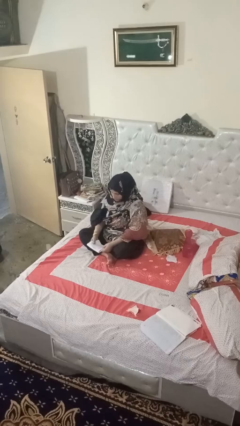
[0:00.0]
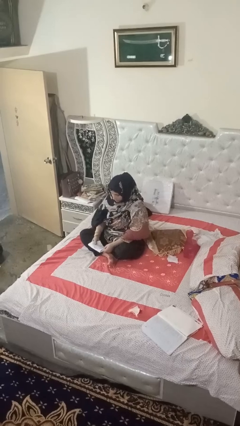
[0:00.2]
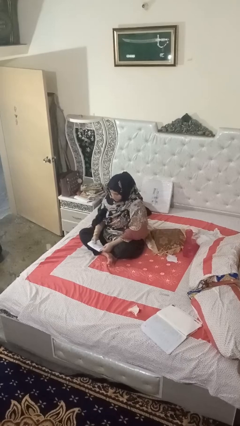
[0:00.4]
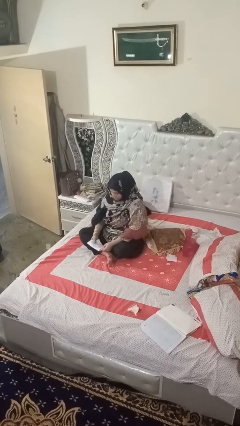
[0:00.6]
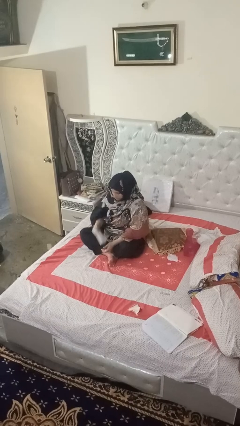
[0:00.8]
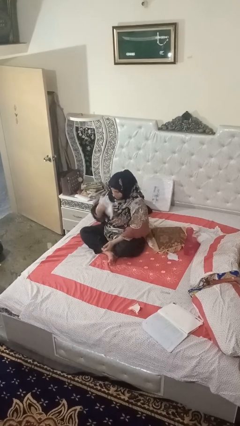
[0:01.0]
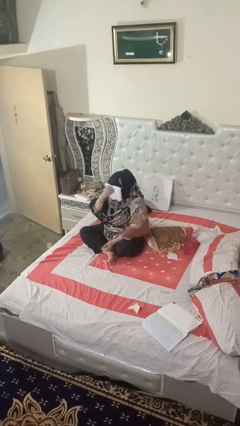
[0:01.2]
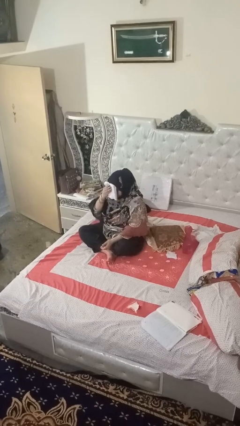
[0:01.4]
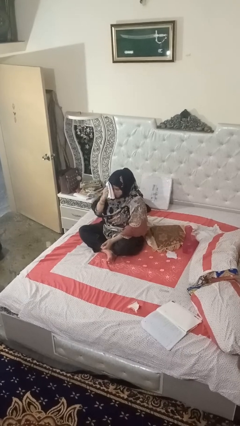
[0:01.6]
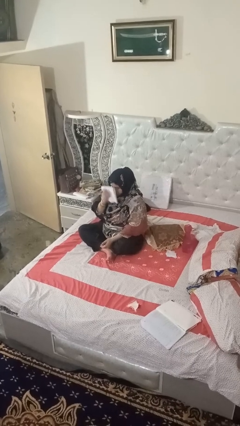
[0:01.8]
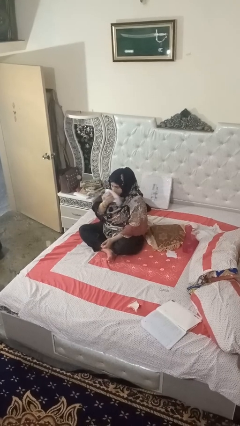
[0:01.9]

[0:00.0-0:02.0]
person wipes mouth with napkin

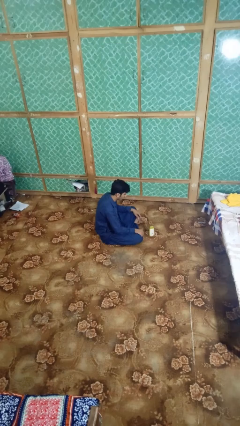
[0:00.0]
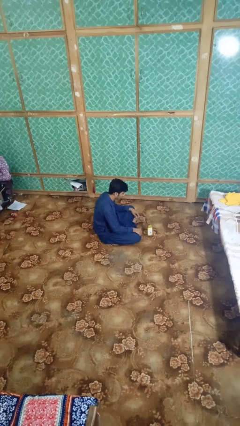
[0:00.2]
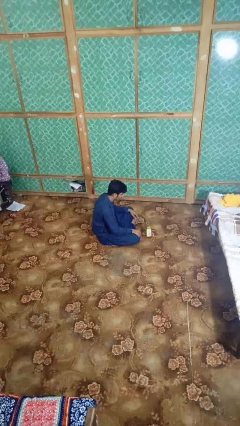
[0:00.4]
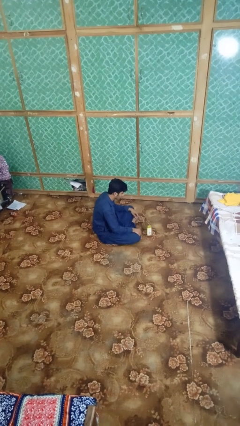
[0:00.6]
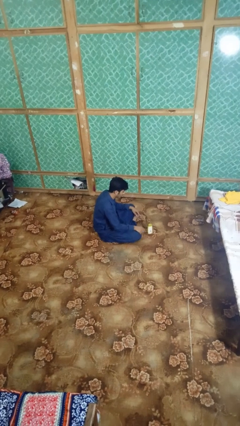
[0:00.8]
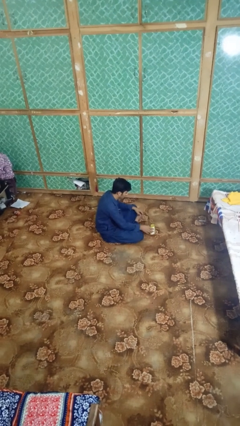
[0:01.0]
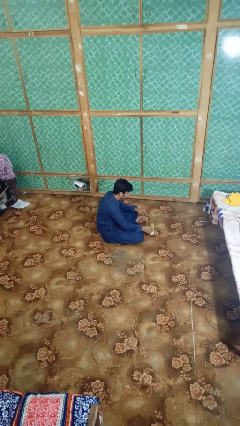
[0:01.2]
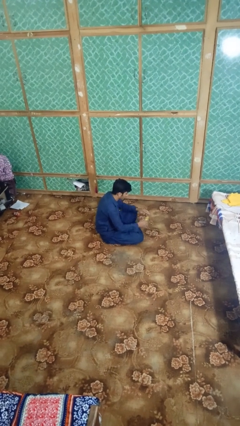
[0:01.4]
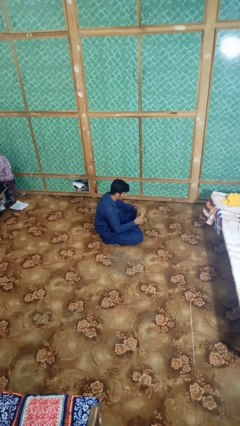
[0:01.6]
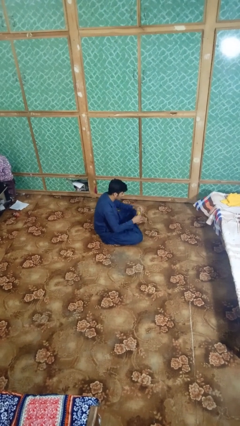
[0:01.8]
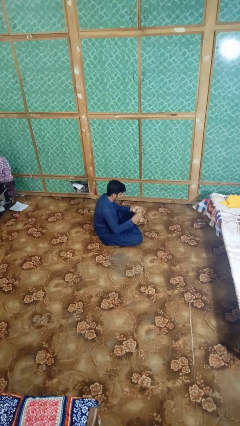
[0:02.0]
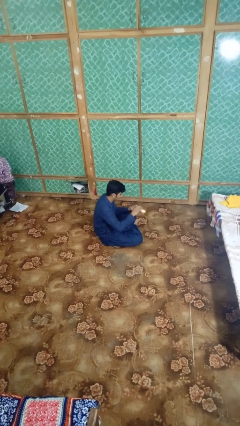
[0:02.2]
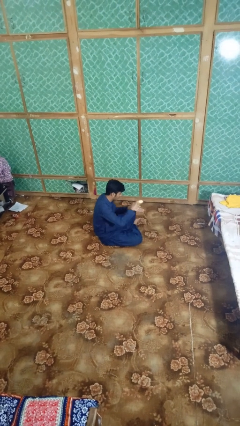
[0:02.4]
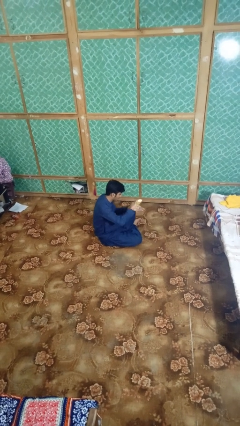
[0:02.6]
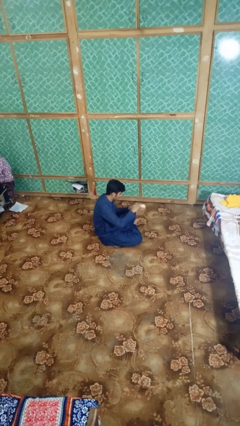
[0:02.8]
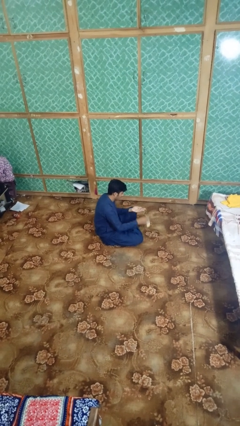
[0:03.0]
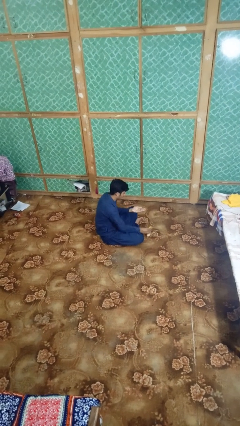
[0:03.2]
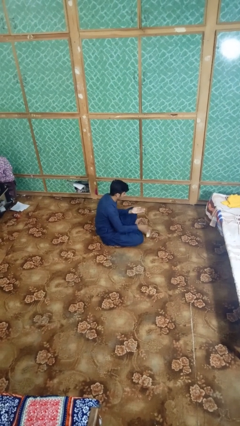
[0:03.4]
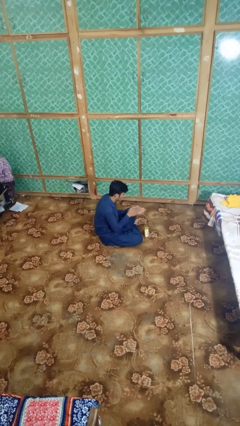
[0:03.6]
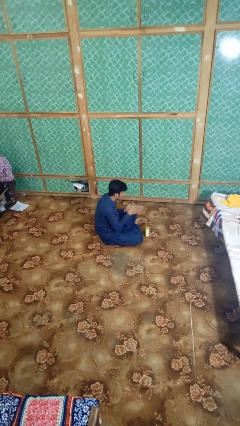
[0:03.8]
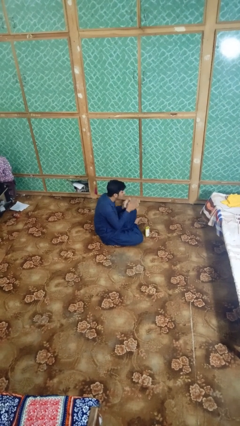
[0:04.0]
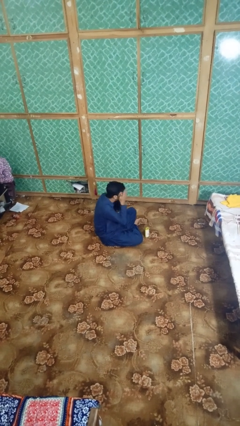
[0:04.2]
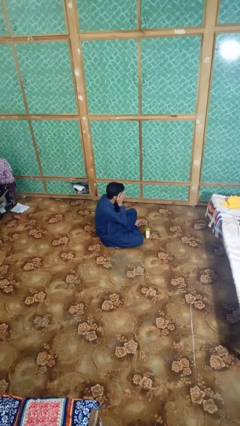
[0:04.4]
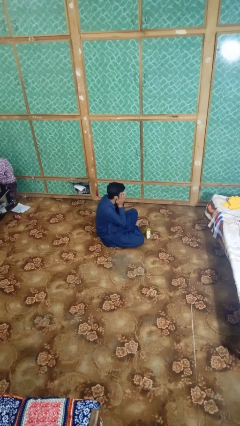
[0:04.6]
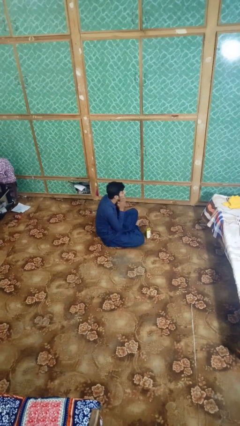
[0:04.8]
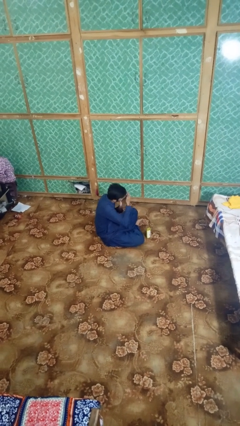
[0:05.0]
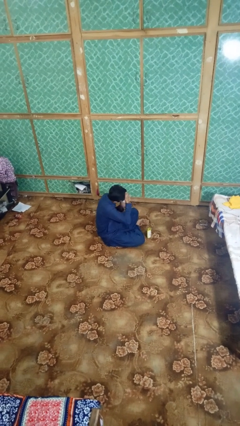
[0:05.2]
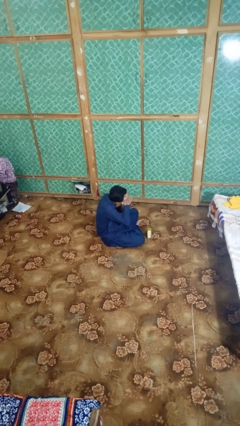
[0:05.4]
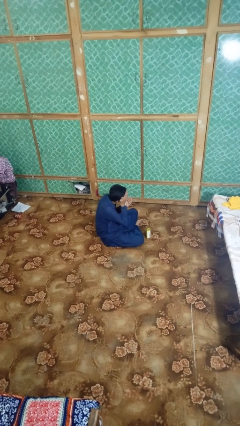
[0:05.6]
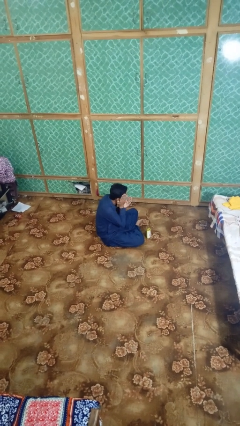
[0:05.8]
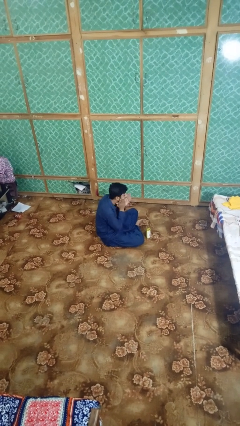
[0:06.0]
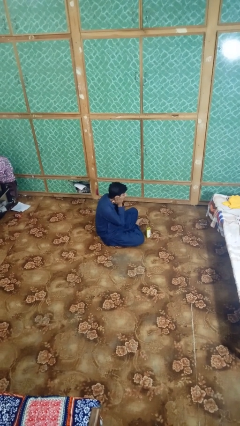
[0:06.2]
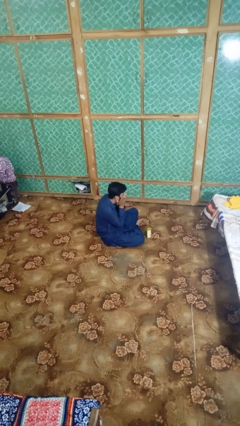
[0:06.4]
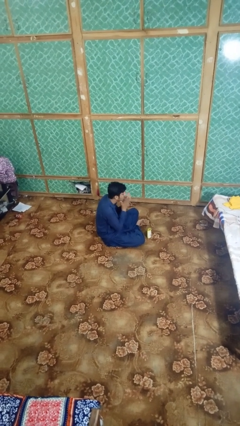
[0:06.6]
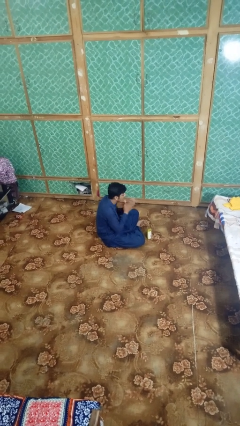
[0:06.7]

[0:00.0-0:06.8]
person applies sunscreen

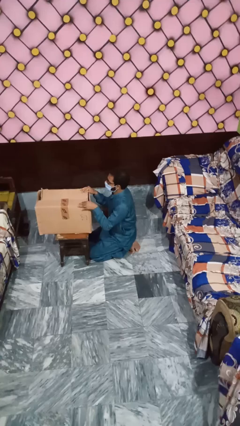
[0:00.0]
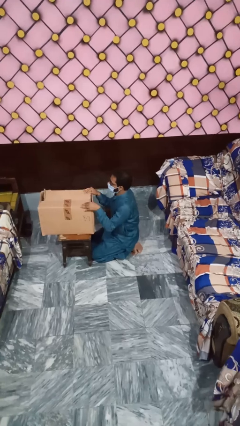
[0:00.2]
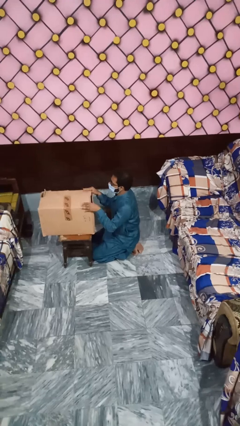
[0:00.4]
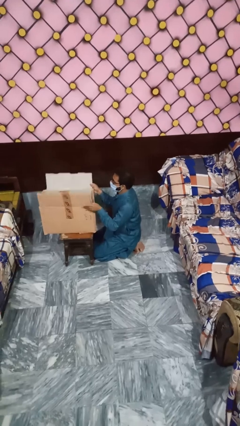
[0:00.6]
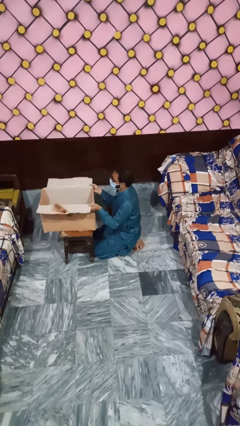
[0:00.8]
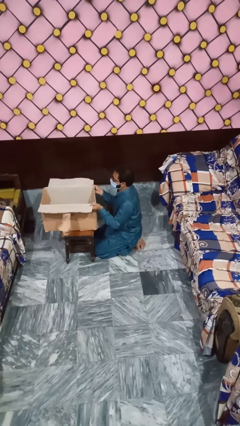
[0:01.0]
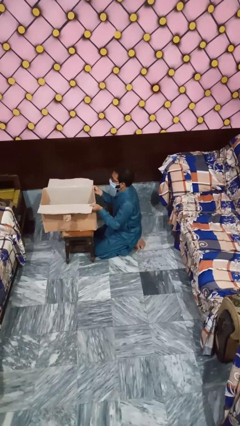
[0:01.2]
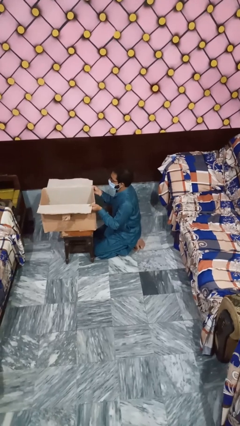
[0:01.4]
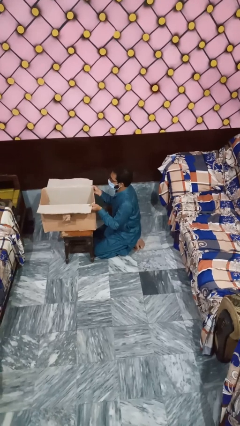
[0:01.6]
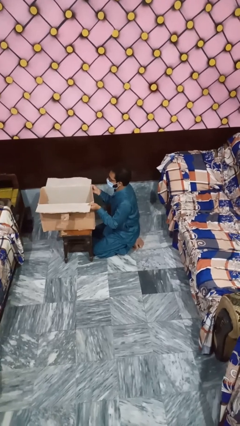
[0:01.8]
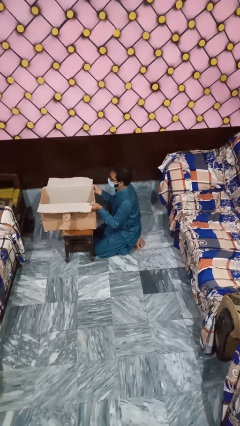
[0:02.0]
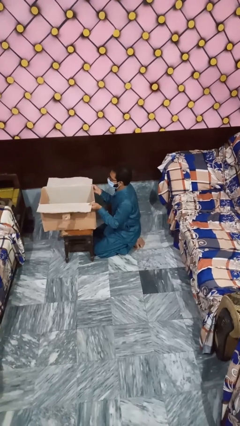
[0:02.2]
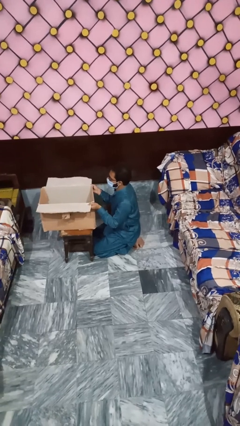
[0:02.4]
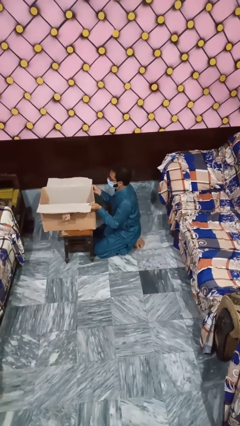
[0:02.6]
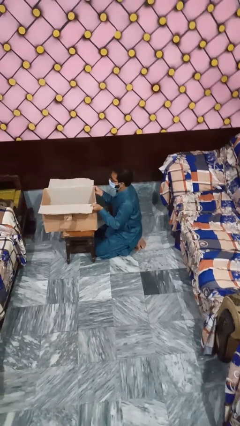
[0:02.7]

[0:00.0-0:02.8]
person opens box

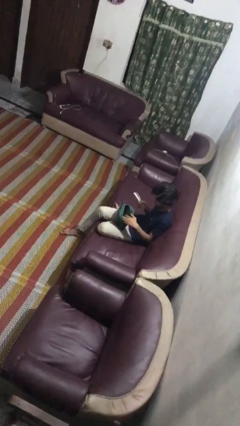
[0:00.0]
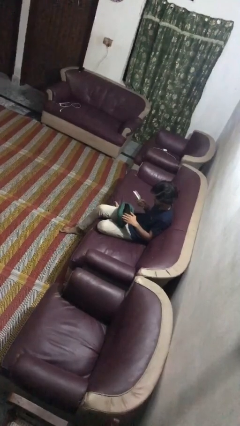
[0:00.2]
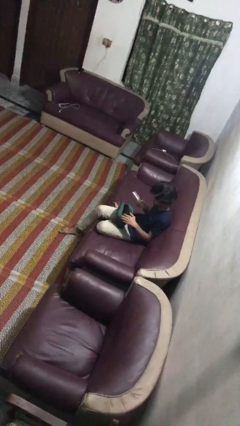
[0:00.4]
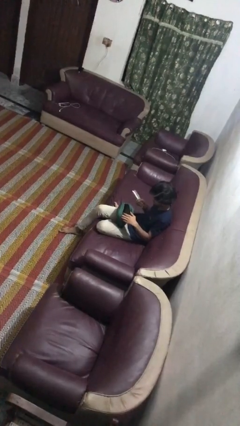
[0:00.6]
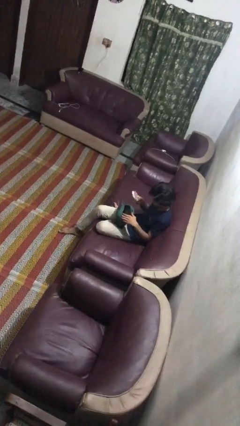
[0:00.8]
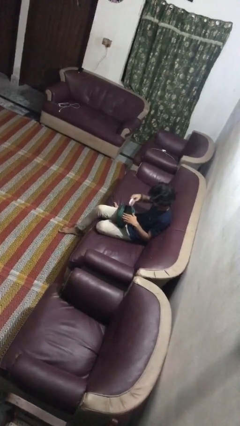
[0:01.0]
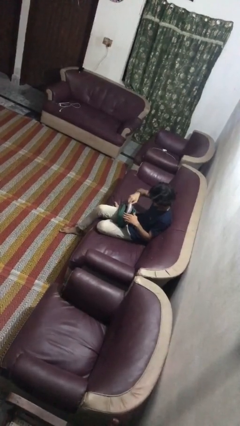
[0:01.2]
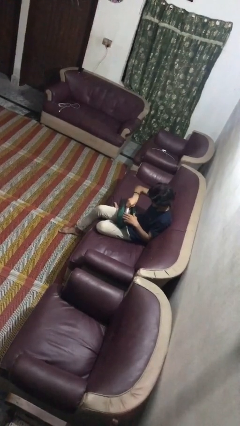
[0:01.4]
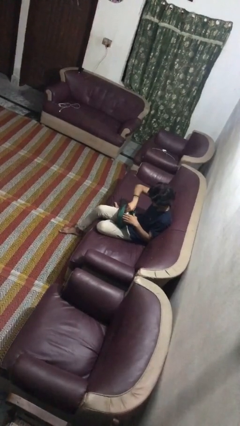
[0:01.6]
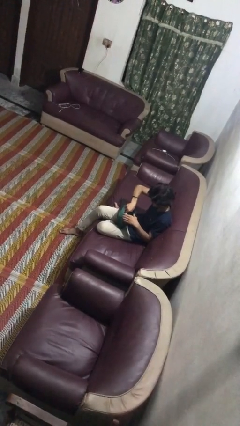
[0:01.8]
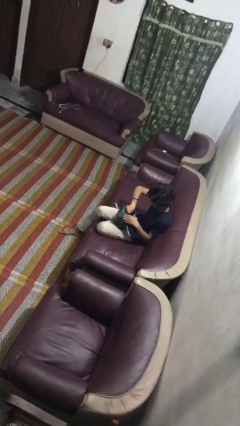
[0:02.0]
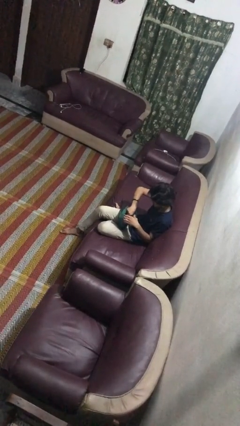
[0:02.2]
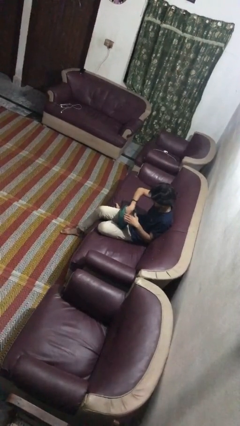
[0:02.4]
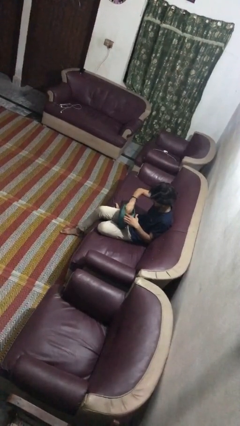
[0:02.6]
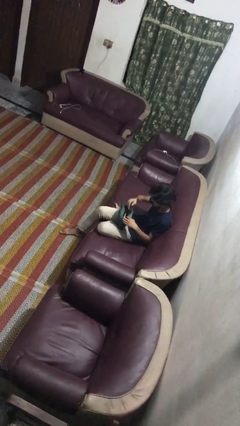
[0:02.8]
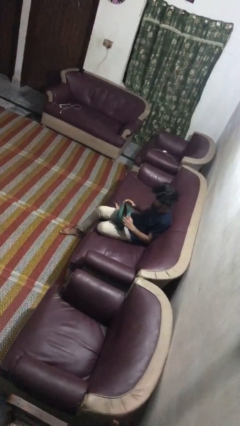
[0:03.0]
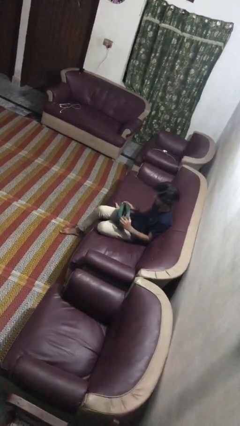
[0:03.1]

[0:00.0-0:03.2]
person puts object into purse

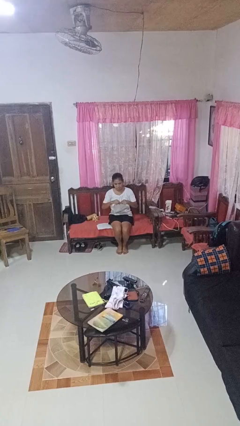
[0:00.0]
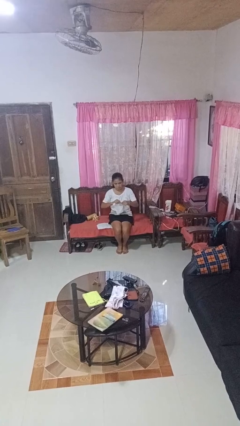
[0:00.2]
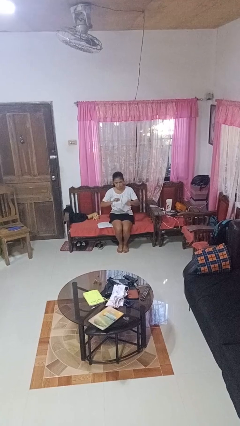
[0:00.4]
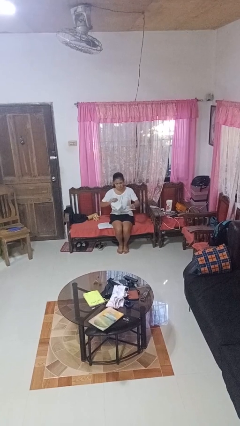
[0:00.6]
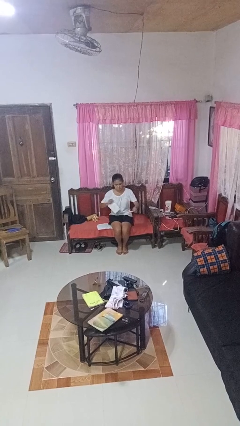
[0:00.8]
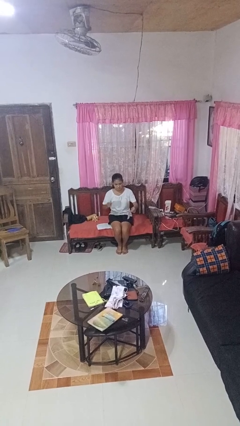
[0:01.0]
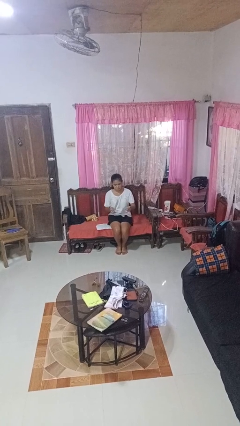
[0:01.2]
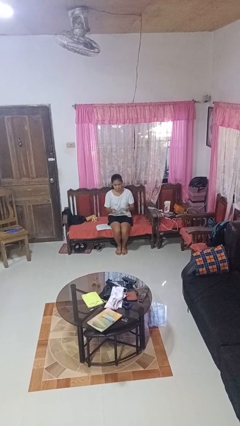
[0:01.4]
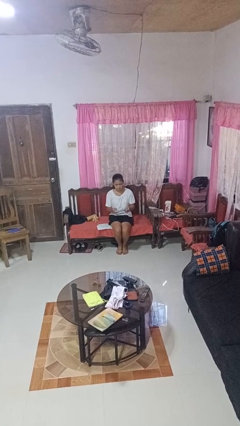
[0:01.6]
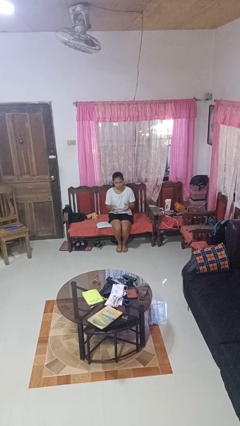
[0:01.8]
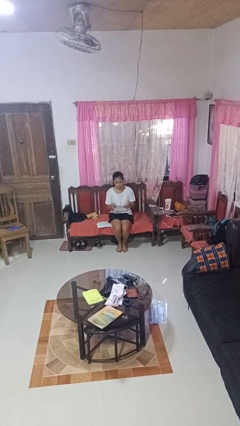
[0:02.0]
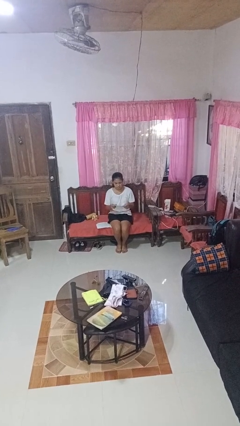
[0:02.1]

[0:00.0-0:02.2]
person tears paper

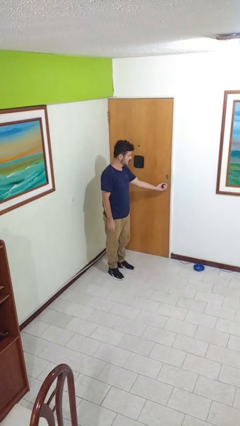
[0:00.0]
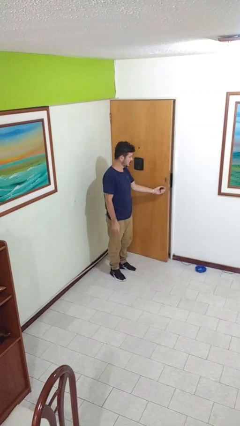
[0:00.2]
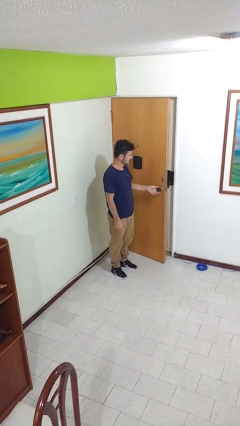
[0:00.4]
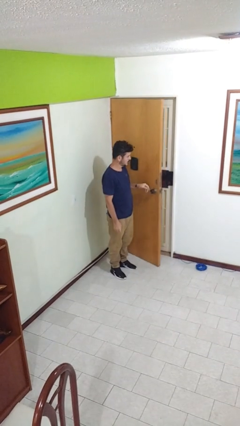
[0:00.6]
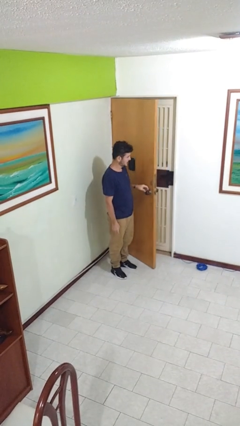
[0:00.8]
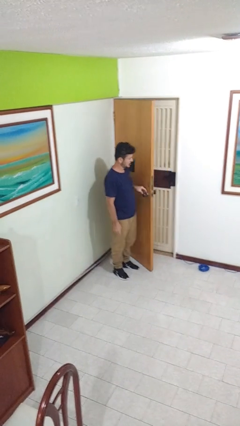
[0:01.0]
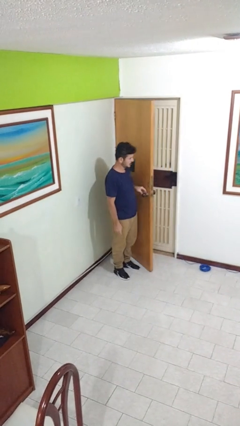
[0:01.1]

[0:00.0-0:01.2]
person opens facility door
